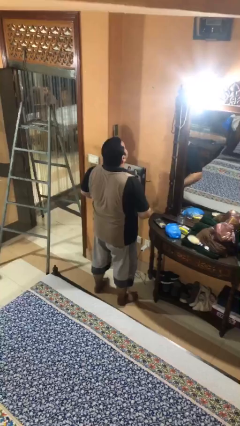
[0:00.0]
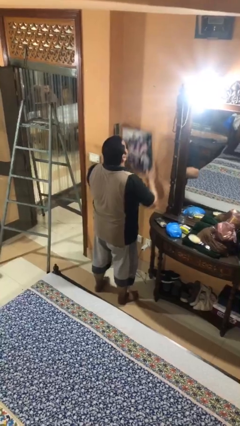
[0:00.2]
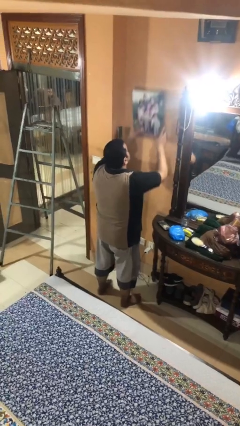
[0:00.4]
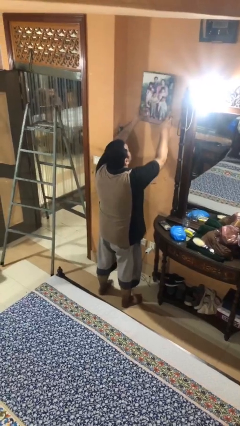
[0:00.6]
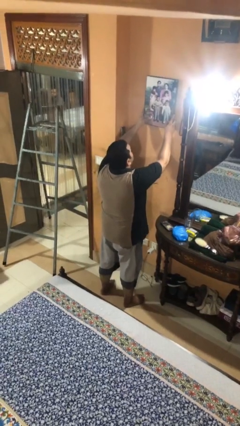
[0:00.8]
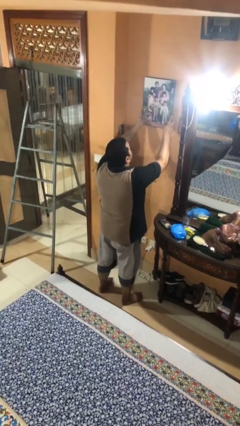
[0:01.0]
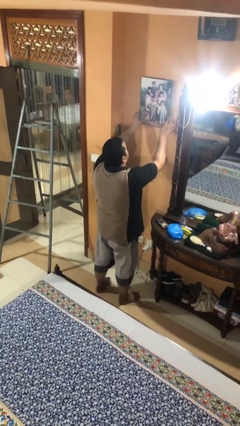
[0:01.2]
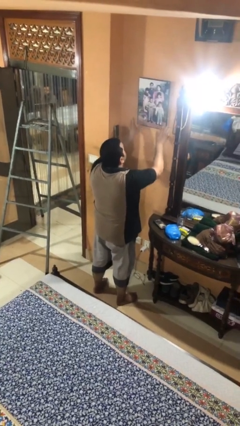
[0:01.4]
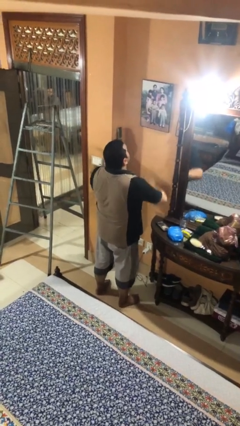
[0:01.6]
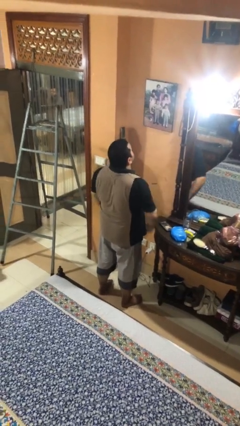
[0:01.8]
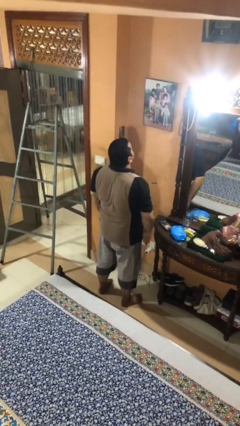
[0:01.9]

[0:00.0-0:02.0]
person puts up picture frame

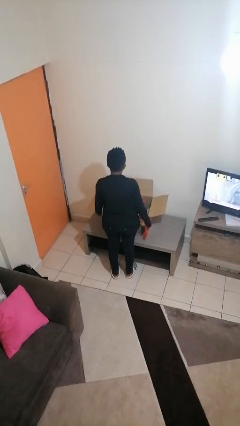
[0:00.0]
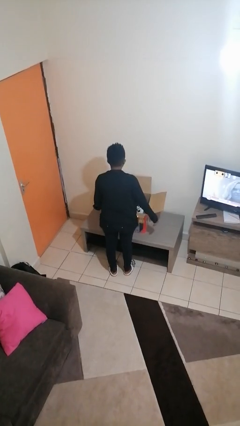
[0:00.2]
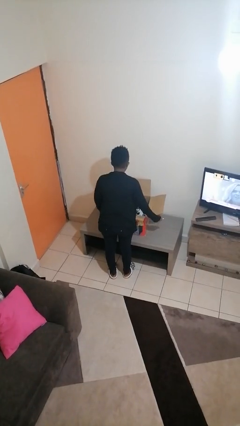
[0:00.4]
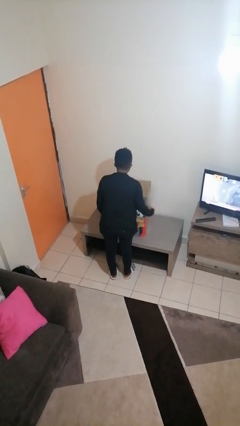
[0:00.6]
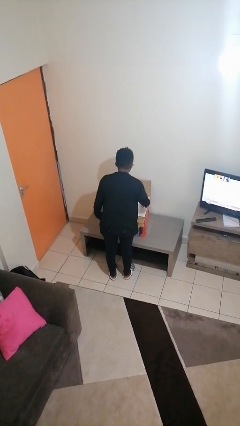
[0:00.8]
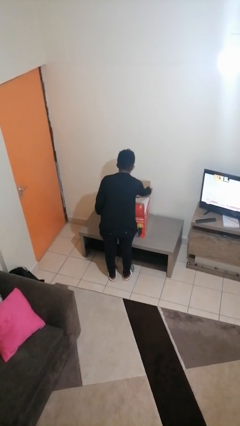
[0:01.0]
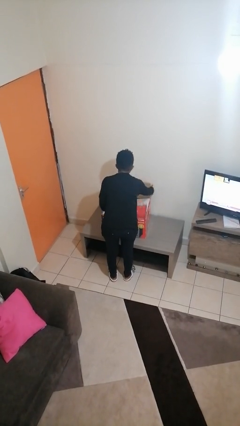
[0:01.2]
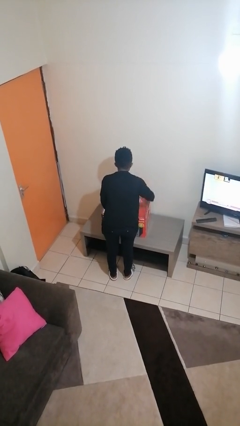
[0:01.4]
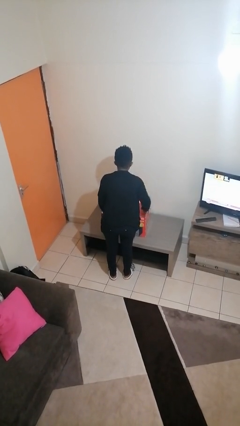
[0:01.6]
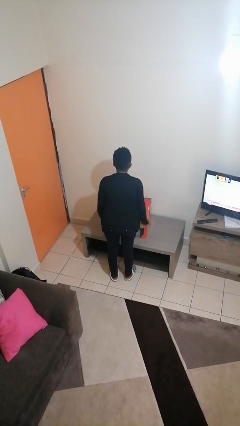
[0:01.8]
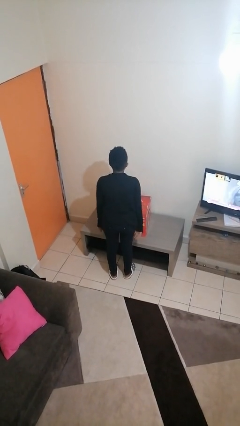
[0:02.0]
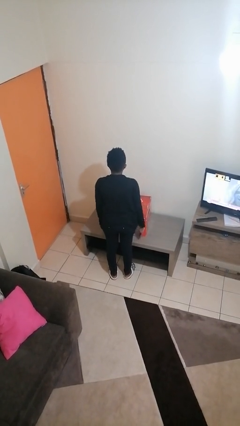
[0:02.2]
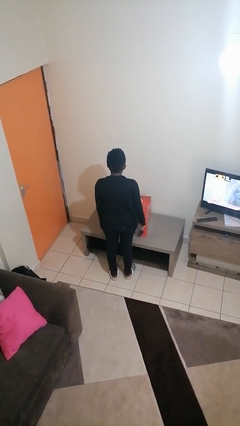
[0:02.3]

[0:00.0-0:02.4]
person closes box

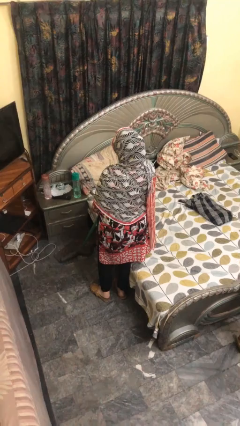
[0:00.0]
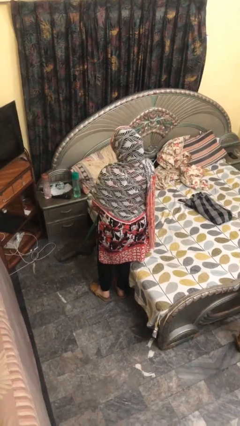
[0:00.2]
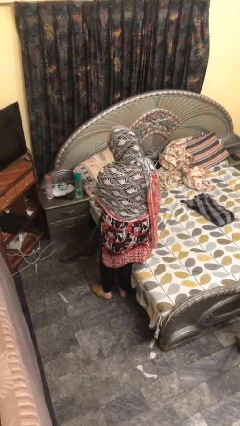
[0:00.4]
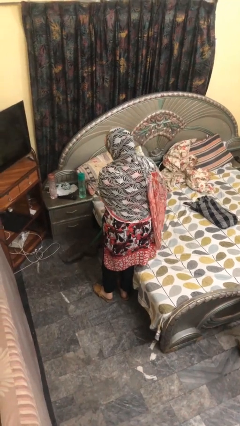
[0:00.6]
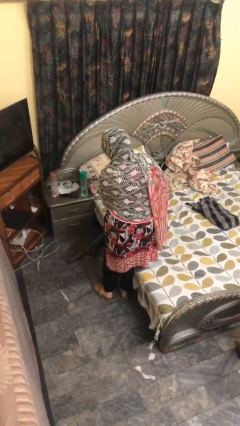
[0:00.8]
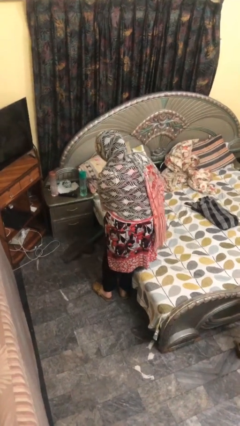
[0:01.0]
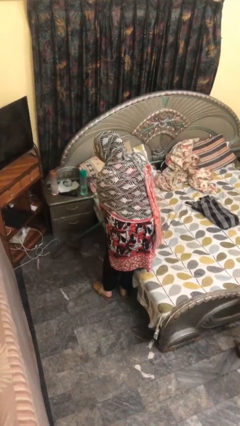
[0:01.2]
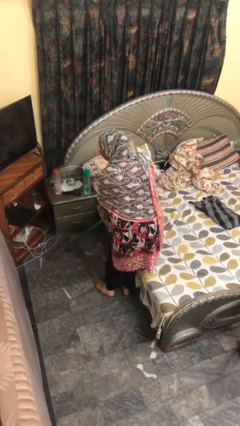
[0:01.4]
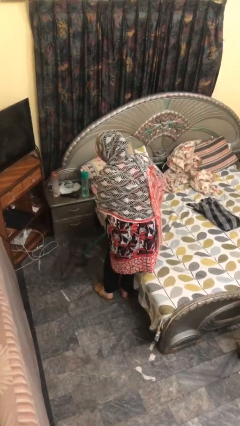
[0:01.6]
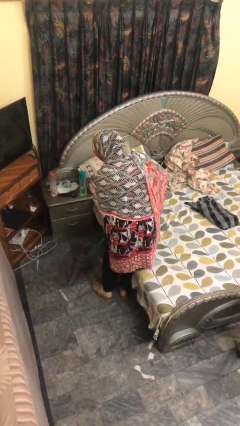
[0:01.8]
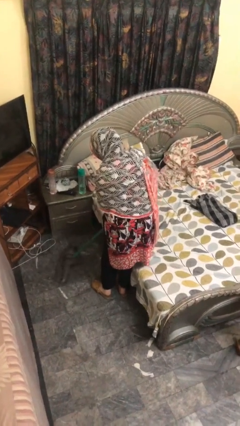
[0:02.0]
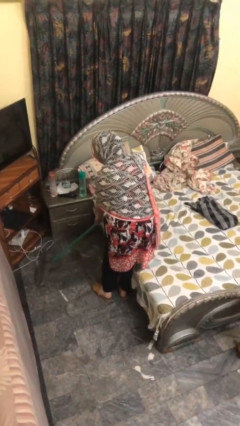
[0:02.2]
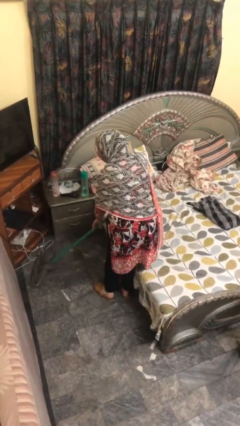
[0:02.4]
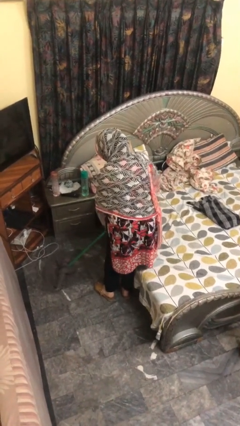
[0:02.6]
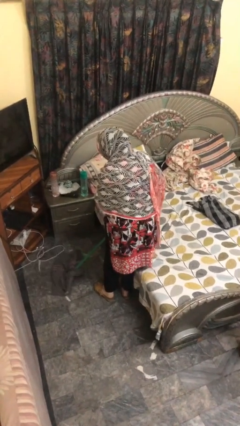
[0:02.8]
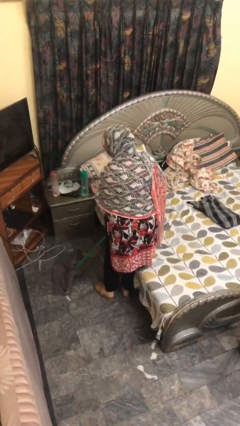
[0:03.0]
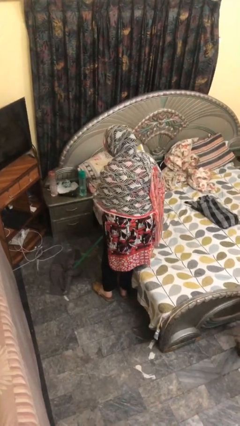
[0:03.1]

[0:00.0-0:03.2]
person mops

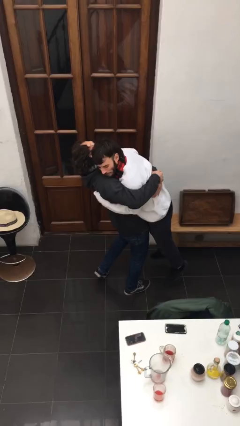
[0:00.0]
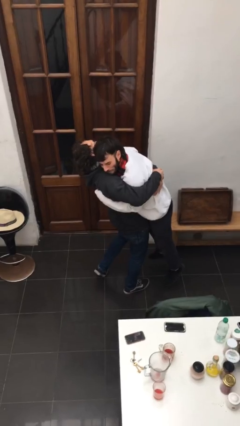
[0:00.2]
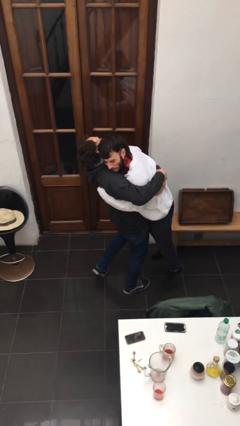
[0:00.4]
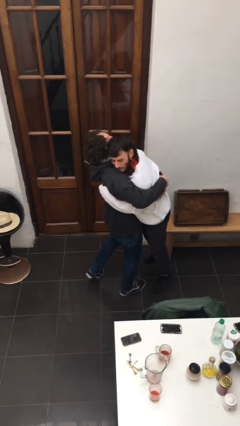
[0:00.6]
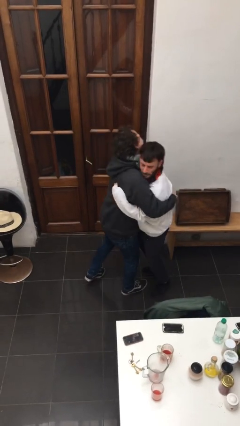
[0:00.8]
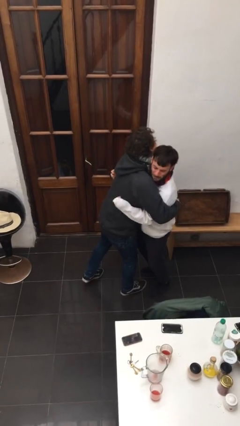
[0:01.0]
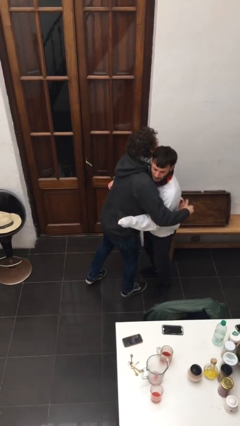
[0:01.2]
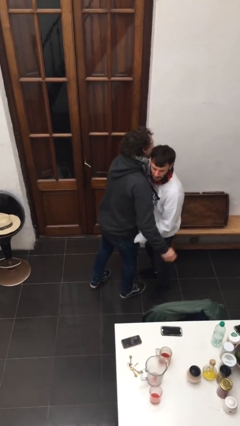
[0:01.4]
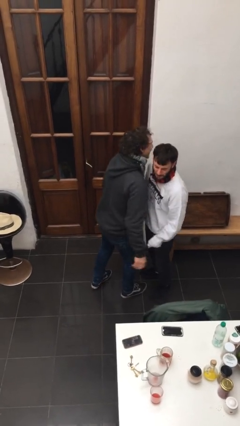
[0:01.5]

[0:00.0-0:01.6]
person puts down person

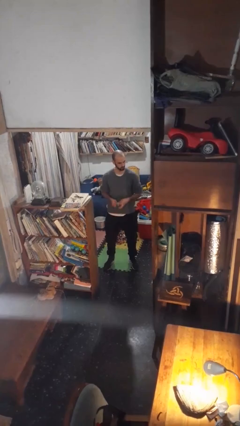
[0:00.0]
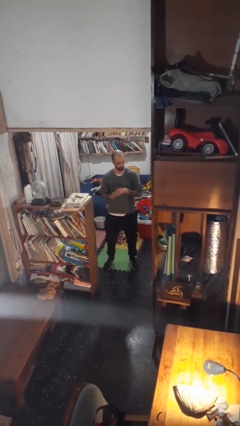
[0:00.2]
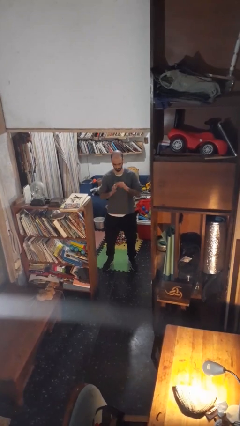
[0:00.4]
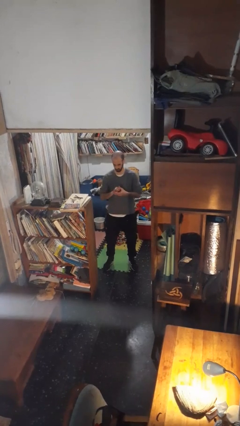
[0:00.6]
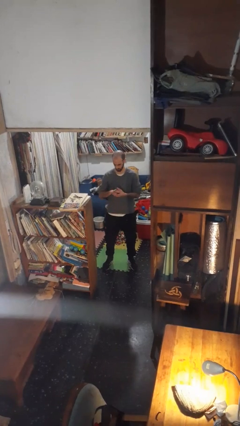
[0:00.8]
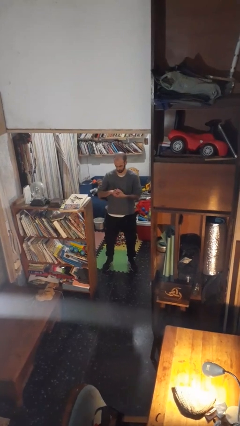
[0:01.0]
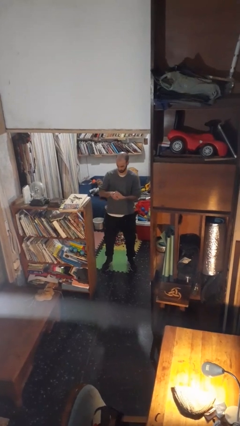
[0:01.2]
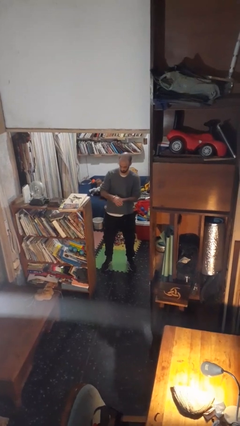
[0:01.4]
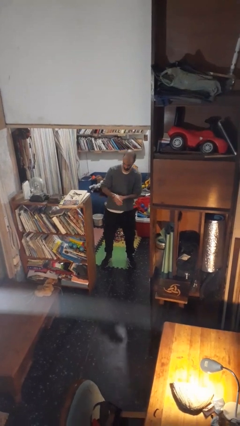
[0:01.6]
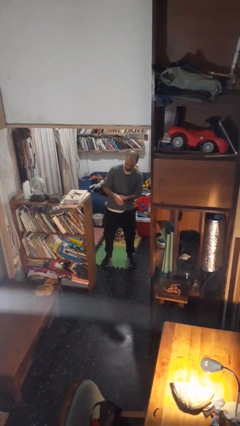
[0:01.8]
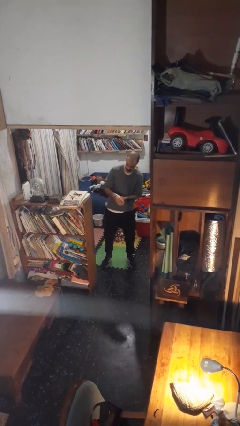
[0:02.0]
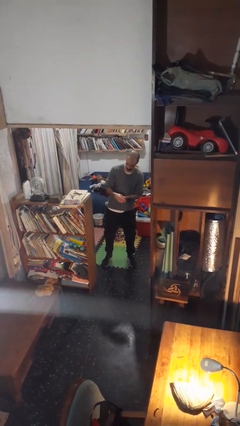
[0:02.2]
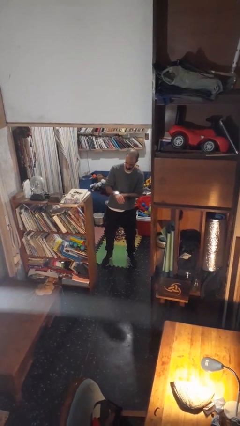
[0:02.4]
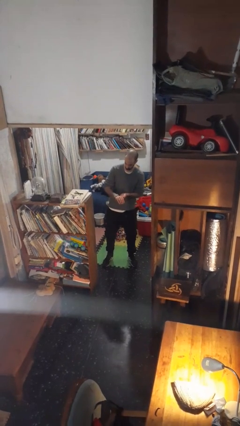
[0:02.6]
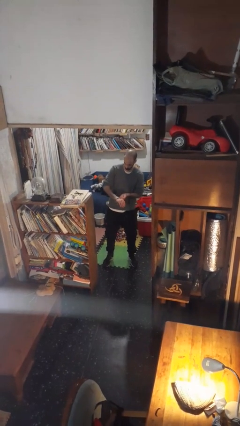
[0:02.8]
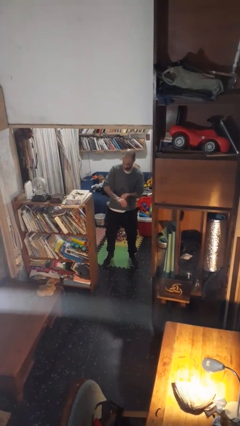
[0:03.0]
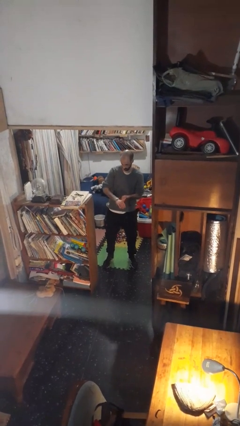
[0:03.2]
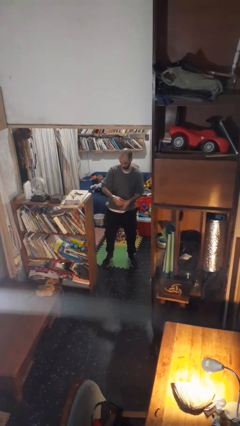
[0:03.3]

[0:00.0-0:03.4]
person puts on wristwatch

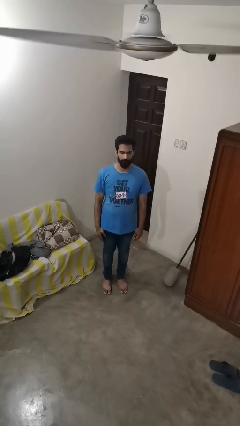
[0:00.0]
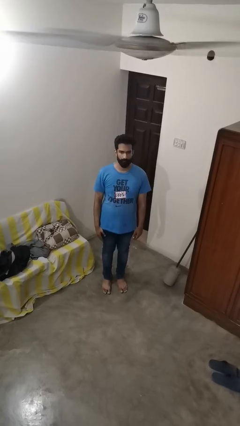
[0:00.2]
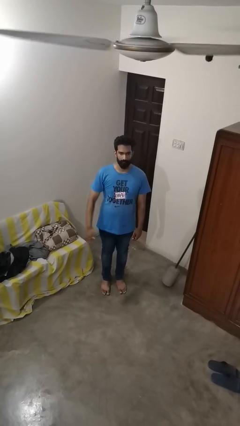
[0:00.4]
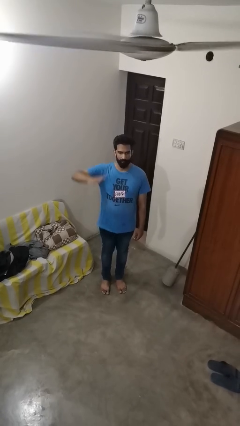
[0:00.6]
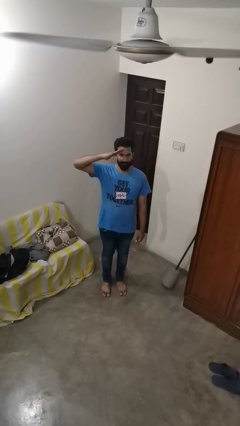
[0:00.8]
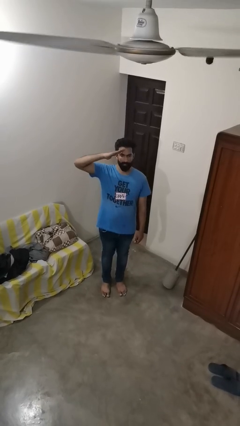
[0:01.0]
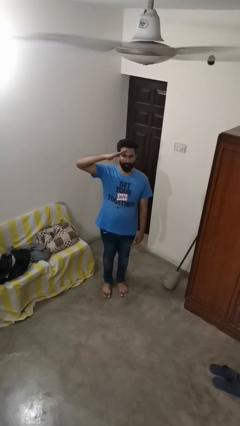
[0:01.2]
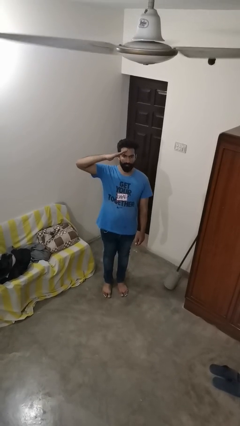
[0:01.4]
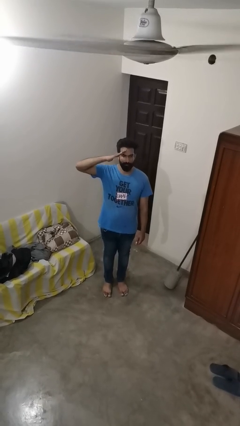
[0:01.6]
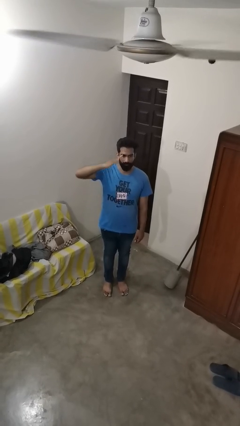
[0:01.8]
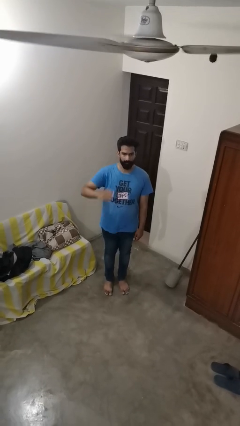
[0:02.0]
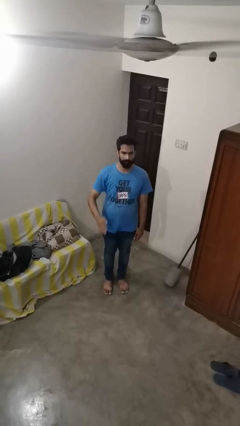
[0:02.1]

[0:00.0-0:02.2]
person salutes

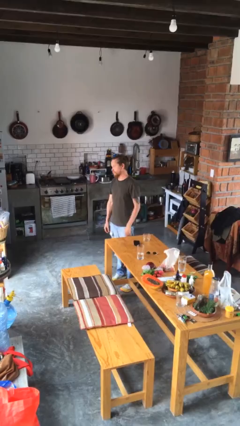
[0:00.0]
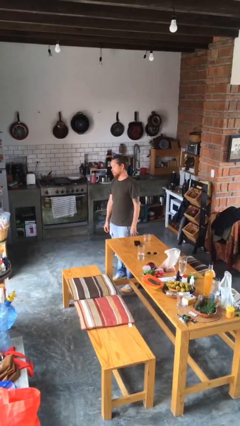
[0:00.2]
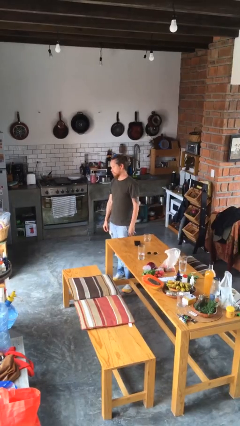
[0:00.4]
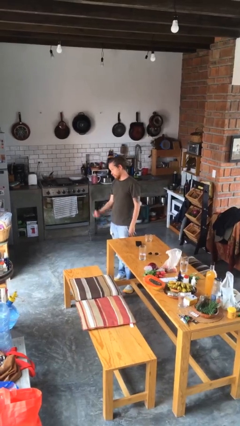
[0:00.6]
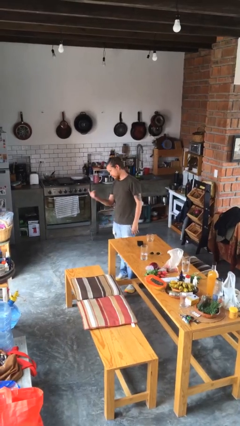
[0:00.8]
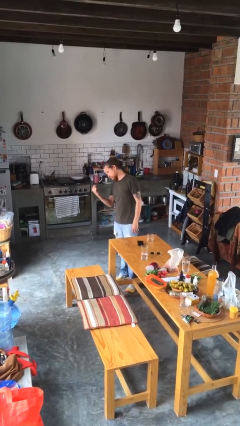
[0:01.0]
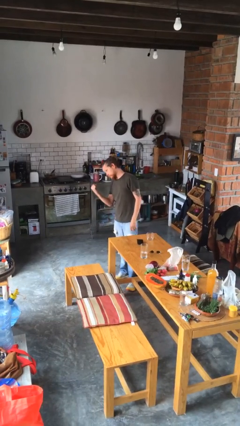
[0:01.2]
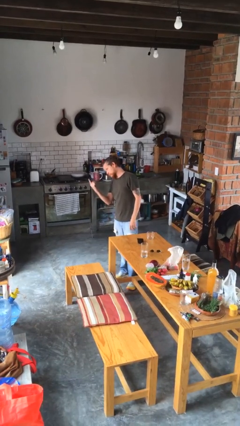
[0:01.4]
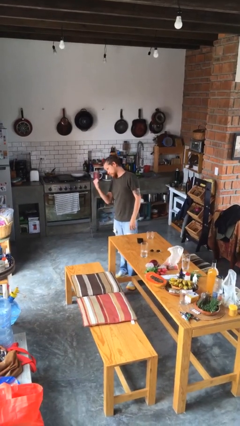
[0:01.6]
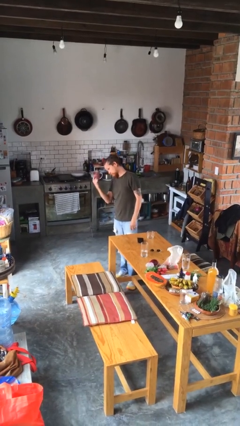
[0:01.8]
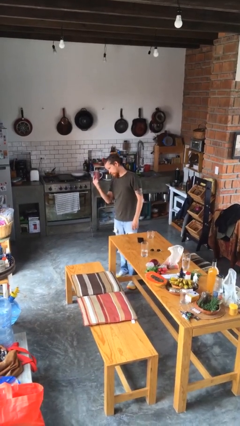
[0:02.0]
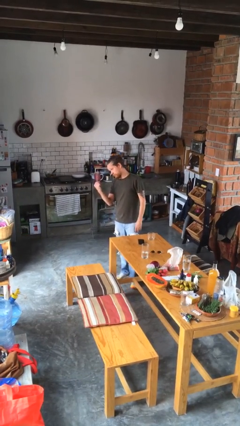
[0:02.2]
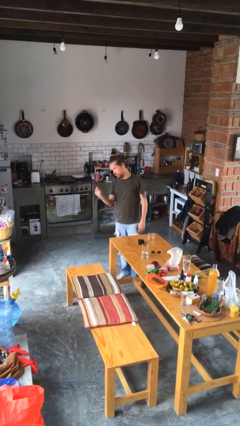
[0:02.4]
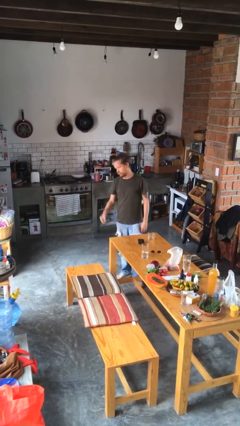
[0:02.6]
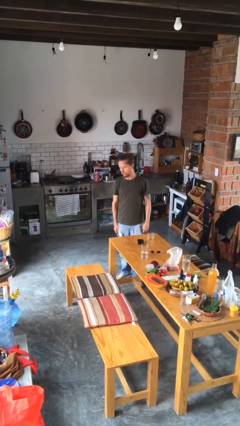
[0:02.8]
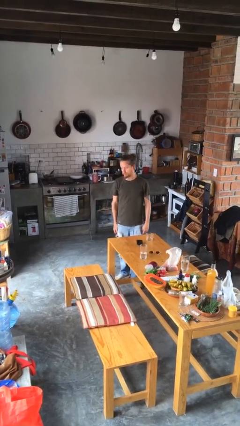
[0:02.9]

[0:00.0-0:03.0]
person gestures come here
